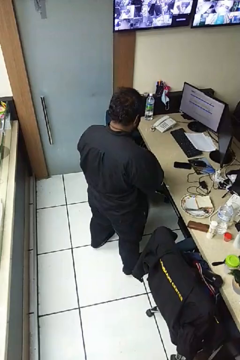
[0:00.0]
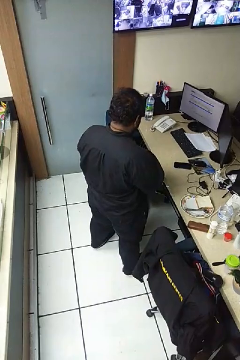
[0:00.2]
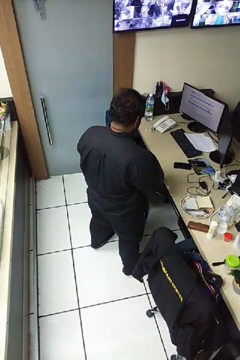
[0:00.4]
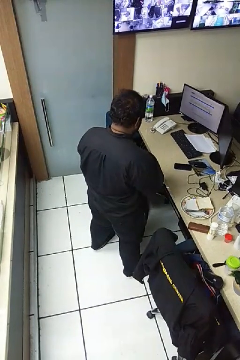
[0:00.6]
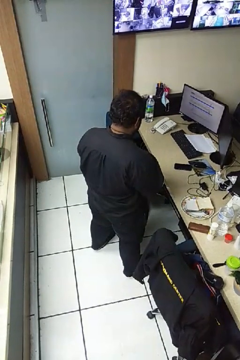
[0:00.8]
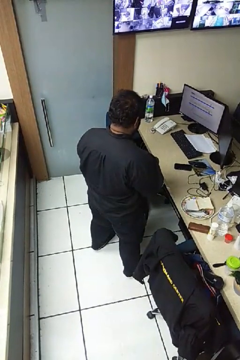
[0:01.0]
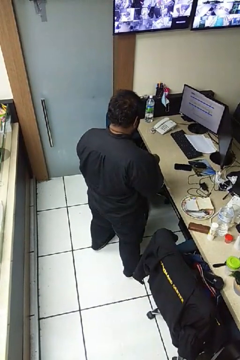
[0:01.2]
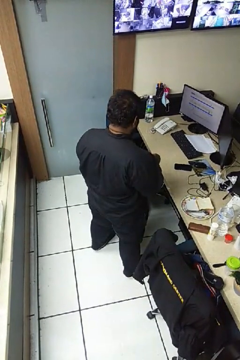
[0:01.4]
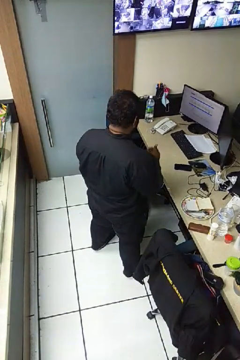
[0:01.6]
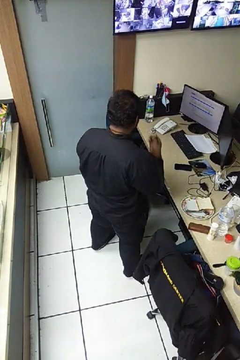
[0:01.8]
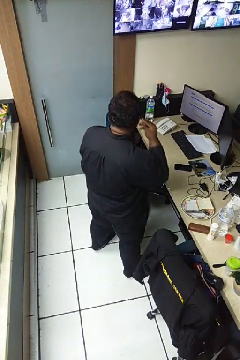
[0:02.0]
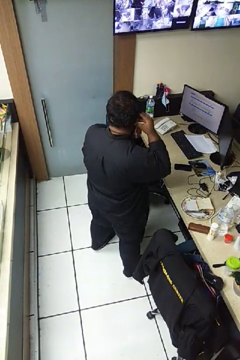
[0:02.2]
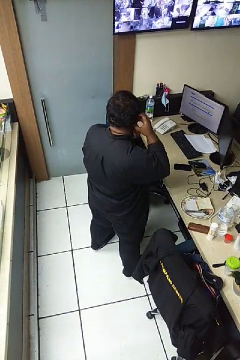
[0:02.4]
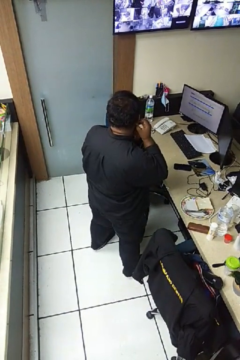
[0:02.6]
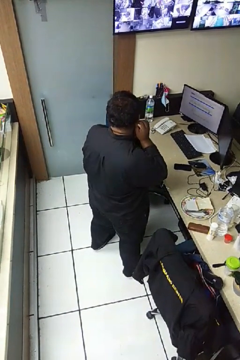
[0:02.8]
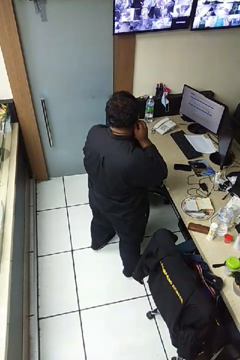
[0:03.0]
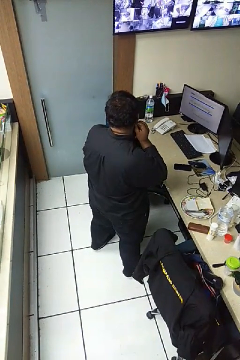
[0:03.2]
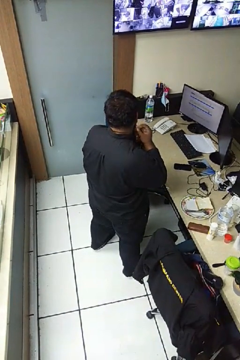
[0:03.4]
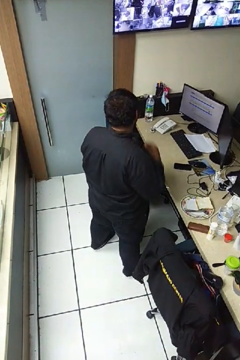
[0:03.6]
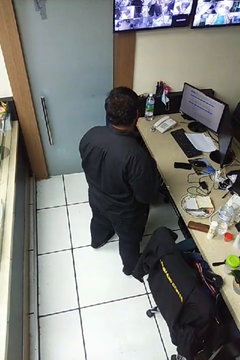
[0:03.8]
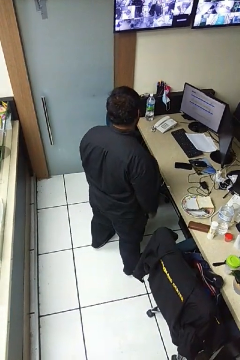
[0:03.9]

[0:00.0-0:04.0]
person puts on earrings

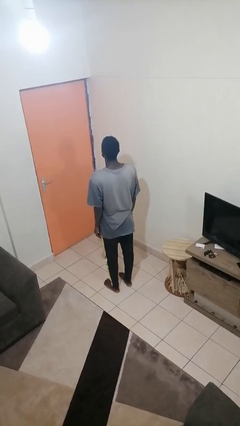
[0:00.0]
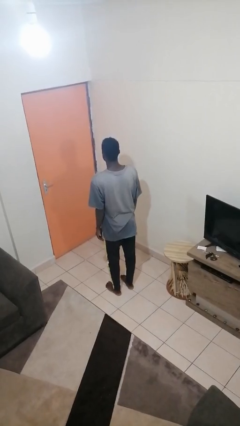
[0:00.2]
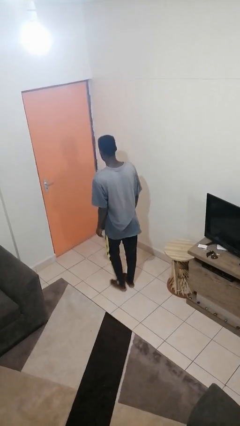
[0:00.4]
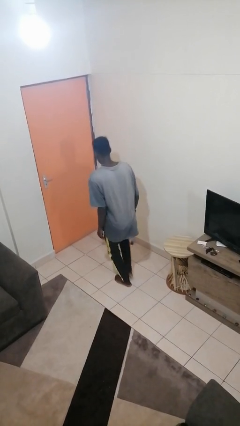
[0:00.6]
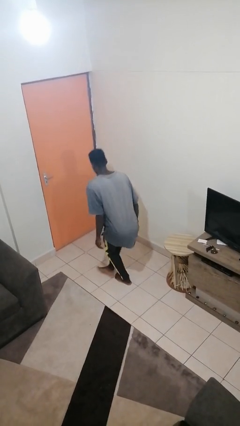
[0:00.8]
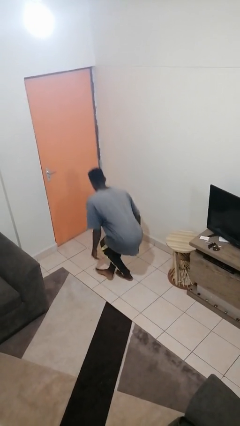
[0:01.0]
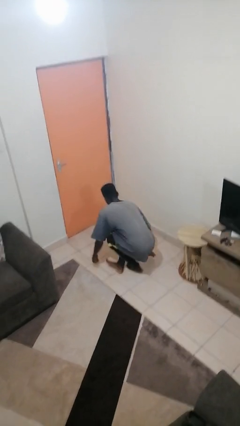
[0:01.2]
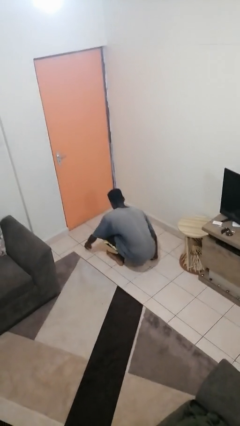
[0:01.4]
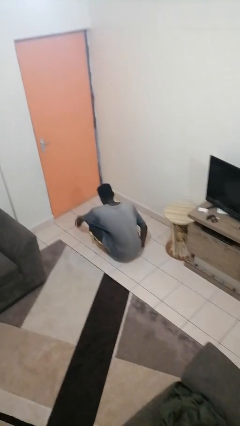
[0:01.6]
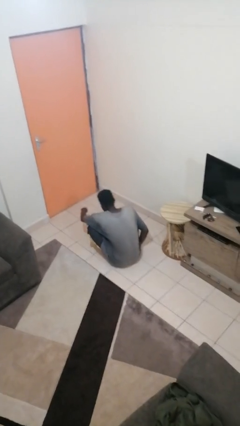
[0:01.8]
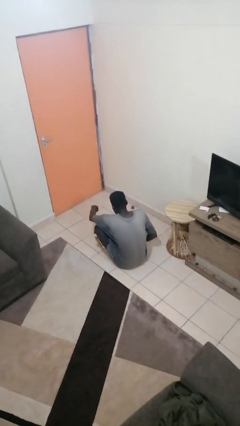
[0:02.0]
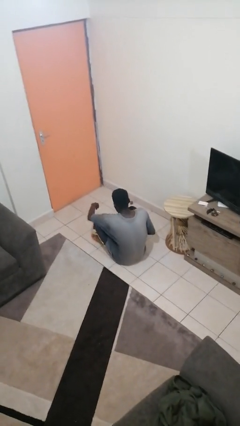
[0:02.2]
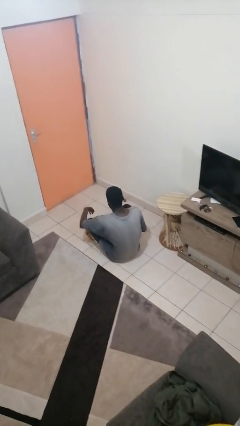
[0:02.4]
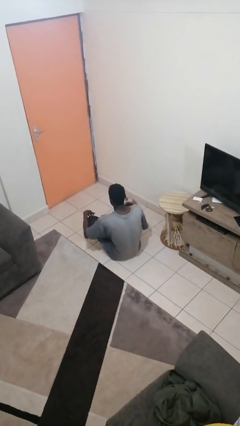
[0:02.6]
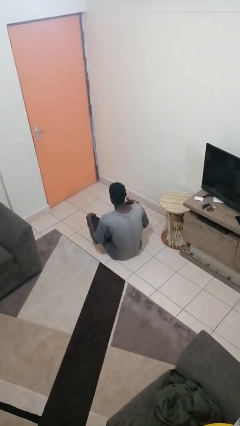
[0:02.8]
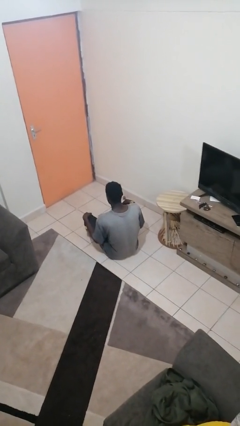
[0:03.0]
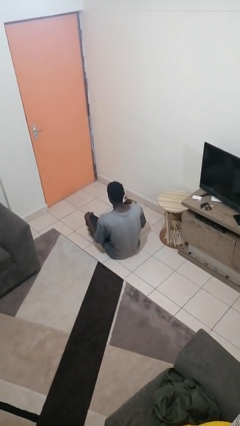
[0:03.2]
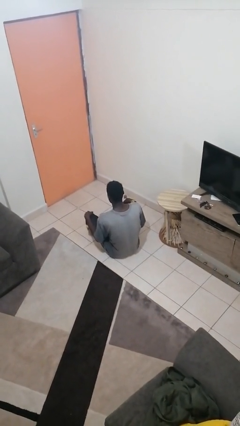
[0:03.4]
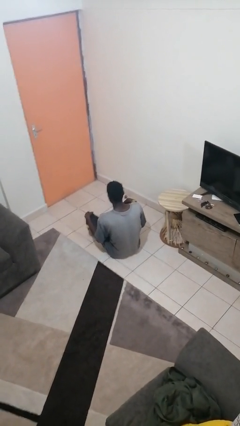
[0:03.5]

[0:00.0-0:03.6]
person sits crisscross

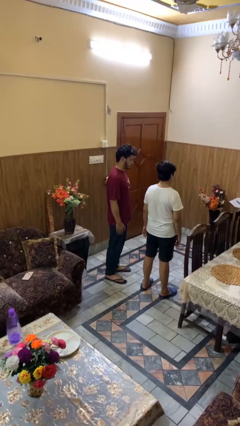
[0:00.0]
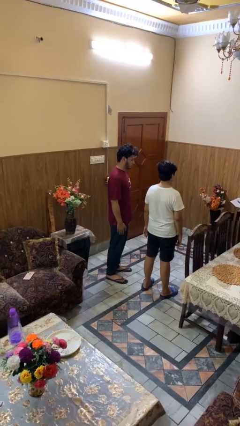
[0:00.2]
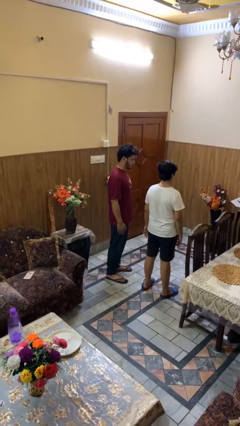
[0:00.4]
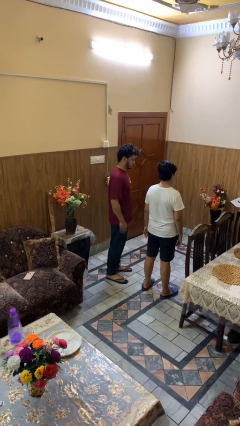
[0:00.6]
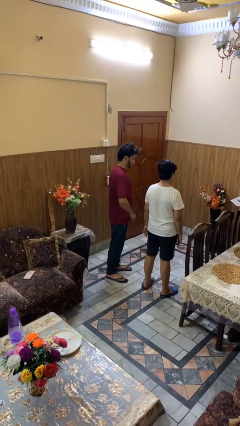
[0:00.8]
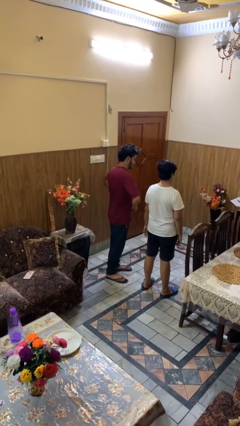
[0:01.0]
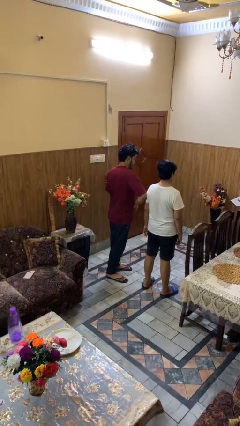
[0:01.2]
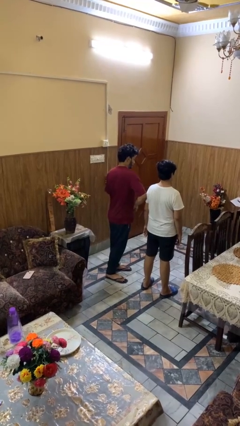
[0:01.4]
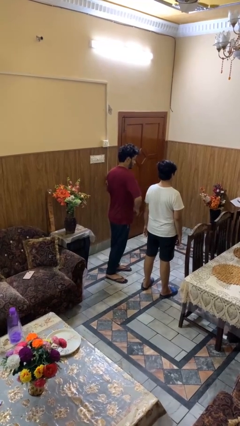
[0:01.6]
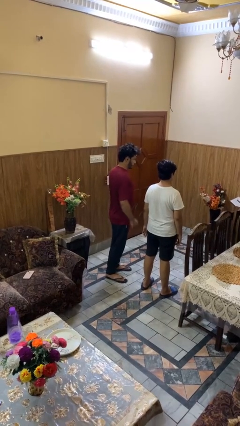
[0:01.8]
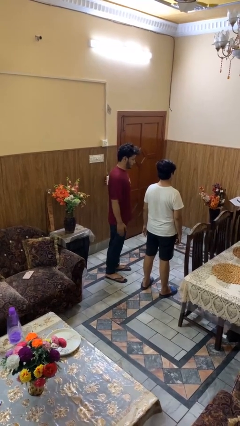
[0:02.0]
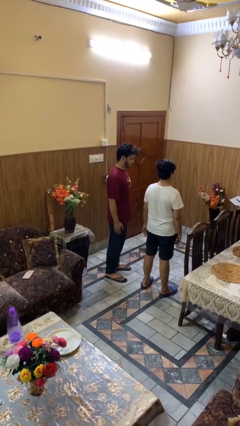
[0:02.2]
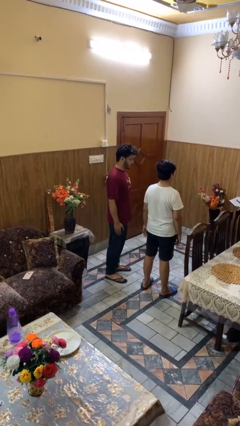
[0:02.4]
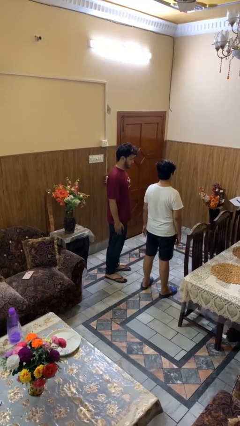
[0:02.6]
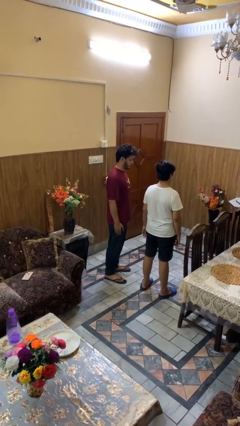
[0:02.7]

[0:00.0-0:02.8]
person nudges person with elbow

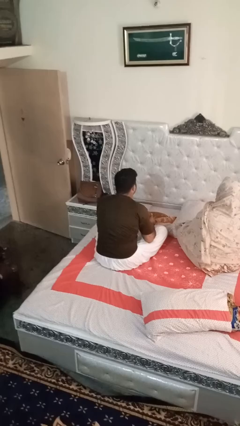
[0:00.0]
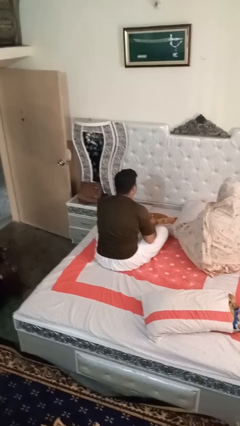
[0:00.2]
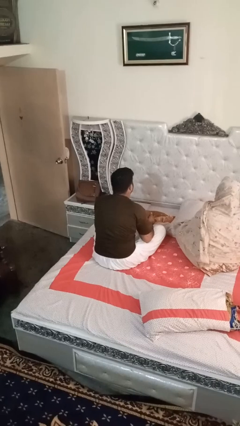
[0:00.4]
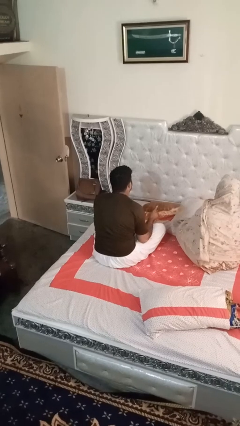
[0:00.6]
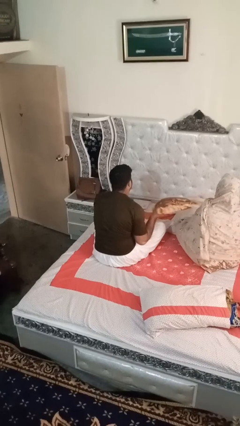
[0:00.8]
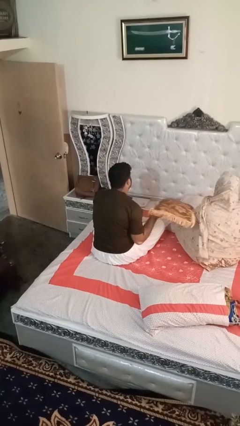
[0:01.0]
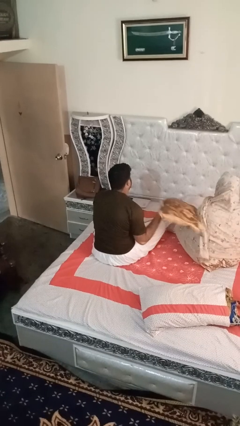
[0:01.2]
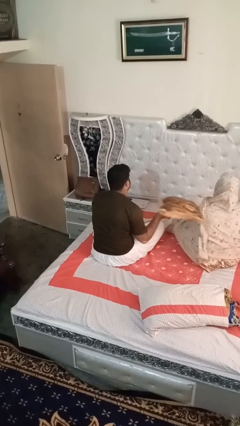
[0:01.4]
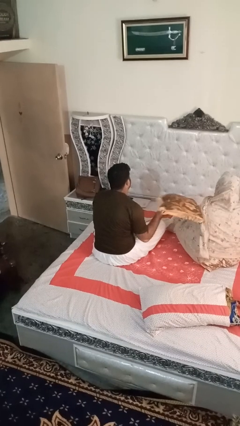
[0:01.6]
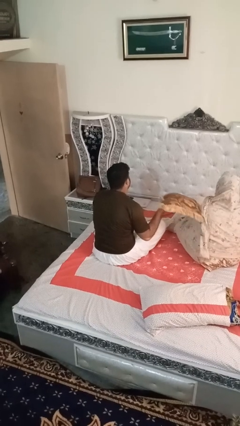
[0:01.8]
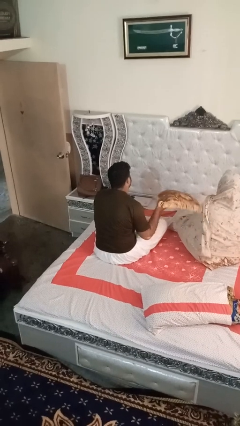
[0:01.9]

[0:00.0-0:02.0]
person hits person with pillow

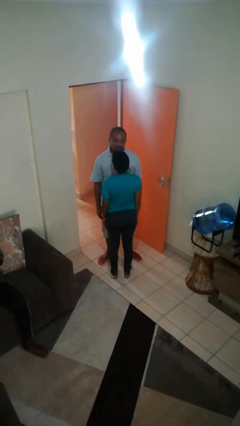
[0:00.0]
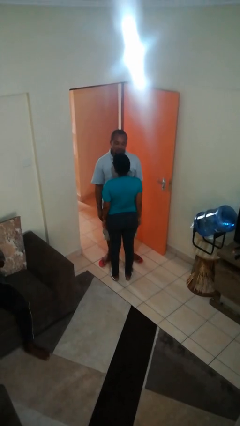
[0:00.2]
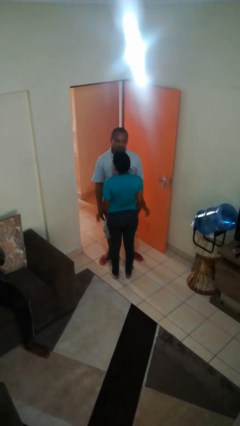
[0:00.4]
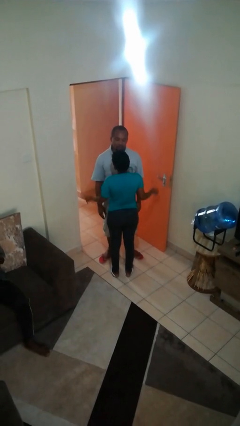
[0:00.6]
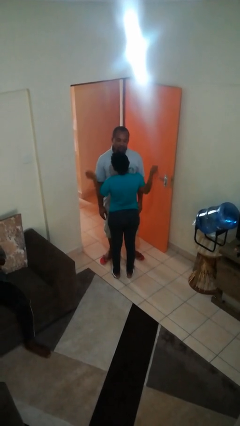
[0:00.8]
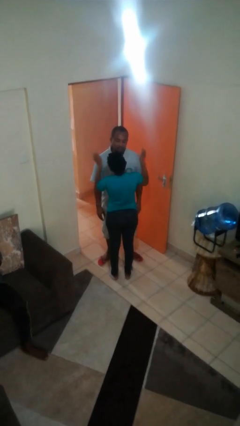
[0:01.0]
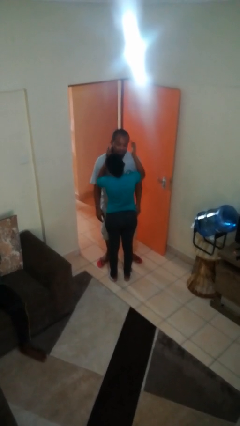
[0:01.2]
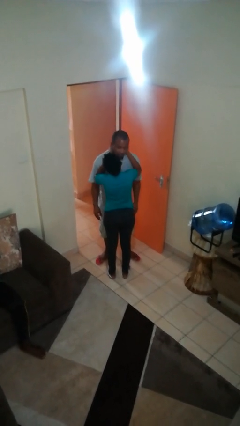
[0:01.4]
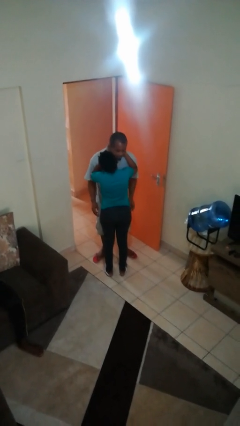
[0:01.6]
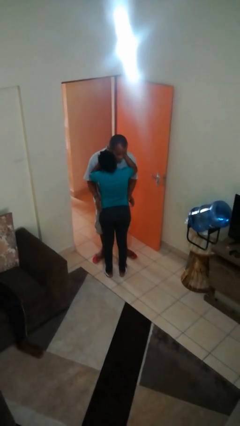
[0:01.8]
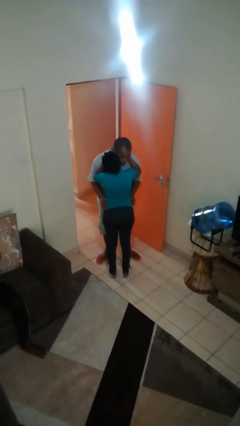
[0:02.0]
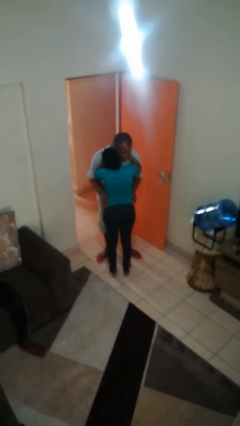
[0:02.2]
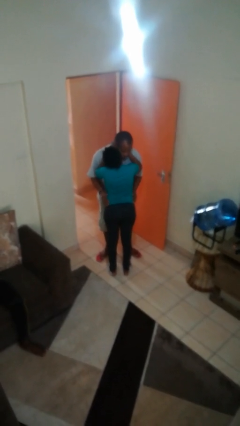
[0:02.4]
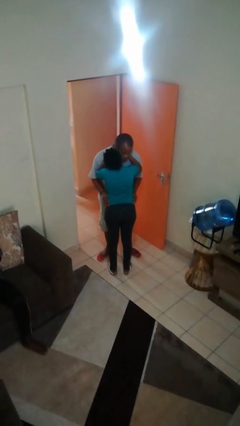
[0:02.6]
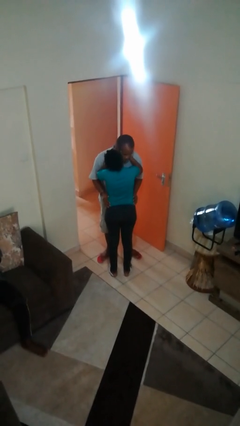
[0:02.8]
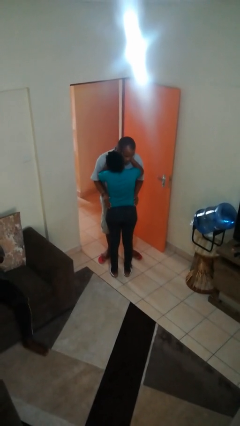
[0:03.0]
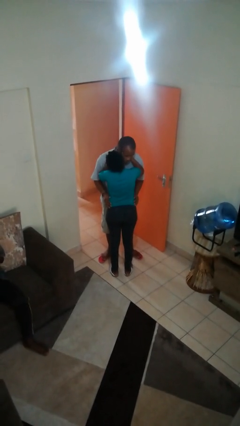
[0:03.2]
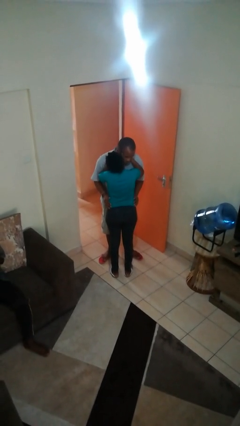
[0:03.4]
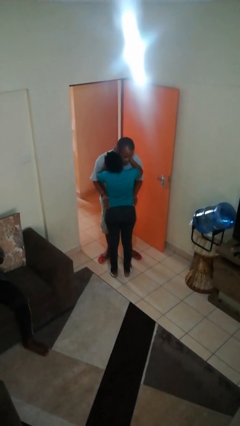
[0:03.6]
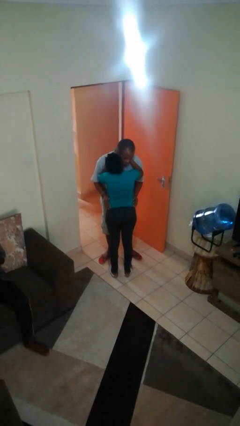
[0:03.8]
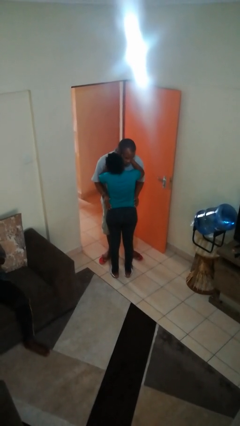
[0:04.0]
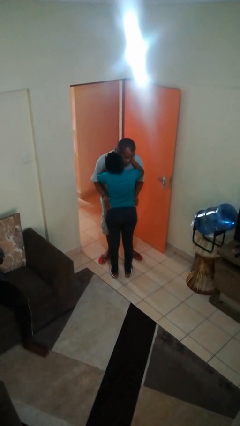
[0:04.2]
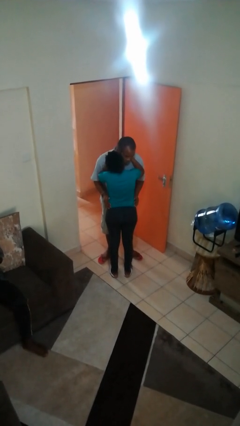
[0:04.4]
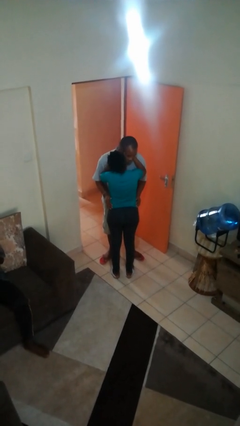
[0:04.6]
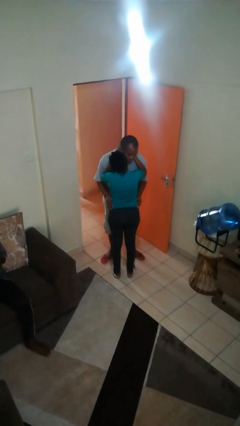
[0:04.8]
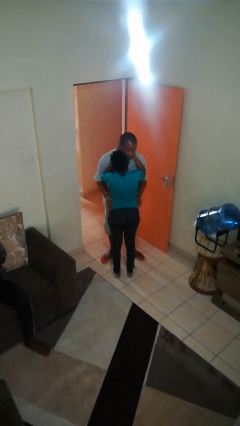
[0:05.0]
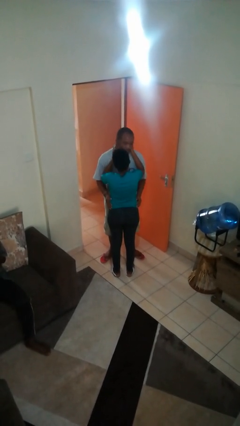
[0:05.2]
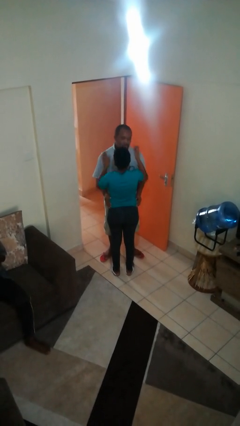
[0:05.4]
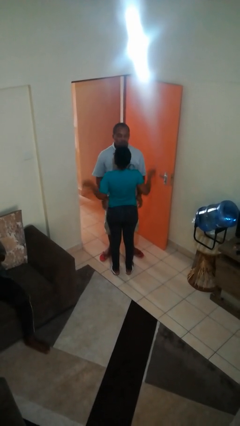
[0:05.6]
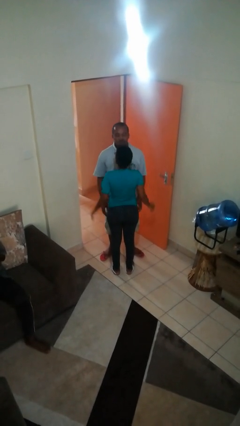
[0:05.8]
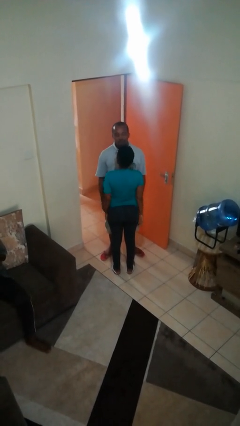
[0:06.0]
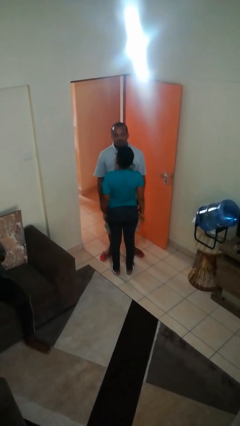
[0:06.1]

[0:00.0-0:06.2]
person kisses cheek of person
